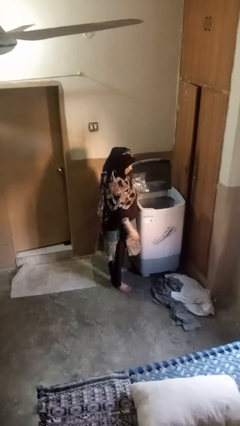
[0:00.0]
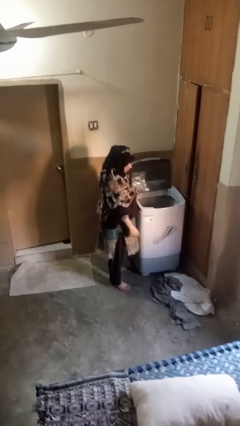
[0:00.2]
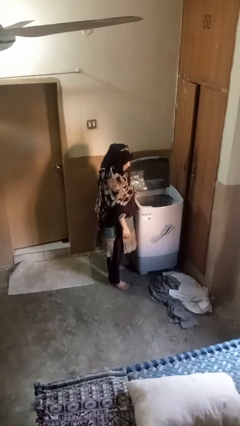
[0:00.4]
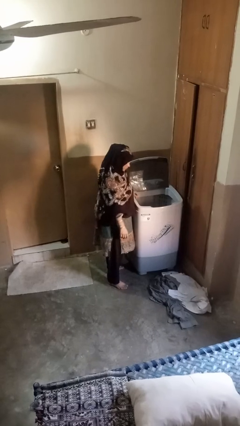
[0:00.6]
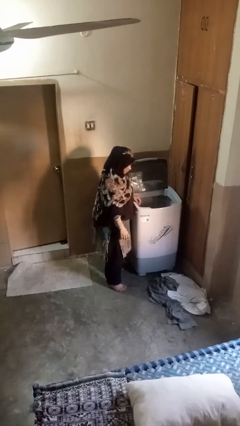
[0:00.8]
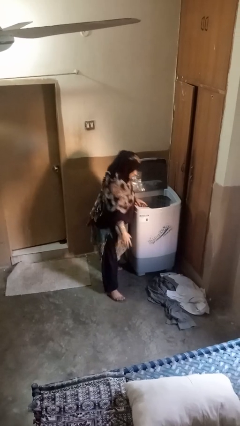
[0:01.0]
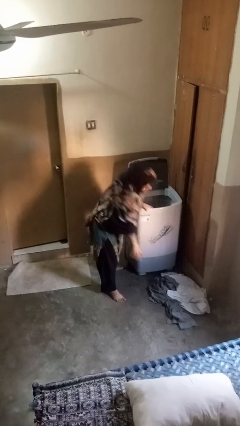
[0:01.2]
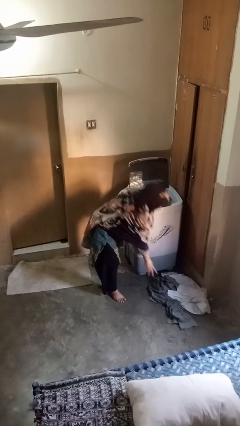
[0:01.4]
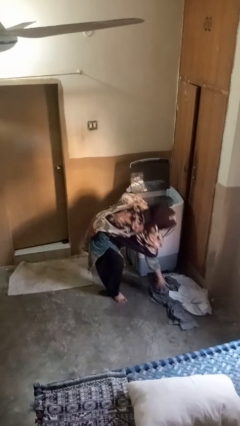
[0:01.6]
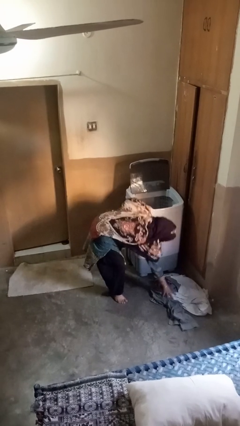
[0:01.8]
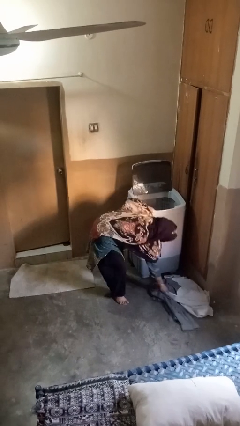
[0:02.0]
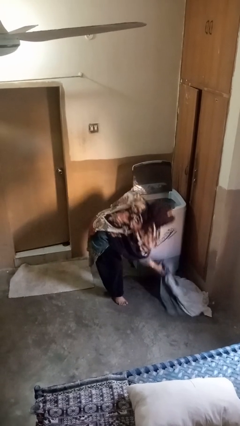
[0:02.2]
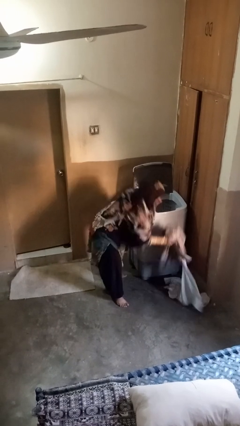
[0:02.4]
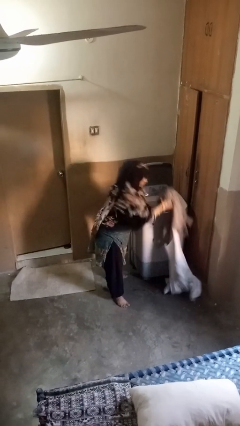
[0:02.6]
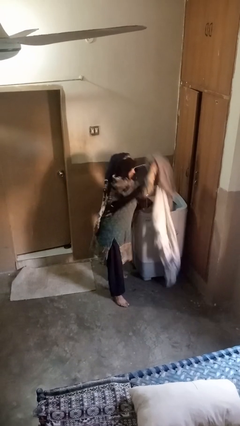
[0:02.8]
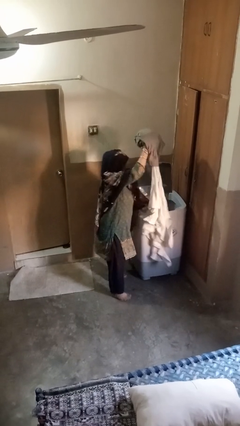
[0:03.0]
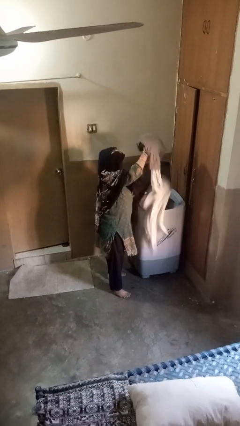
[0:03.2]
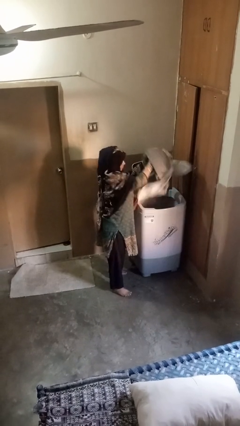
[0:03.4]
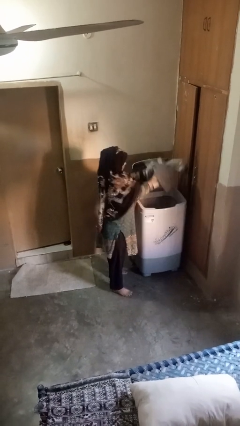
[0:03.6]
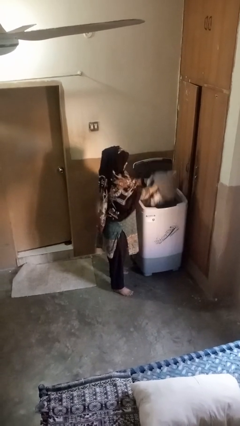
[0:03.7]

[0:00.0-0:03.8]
person loads clotheswasher

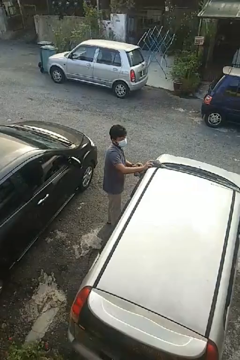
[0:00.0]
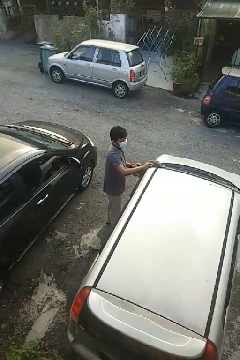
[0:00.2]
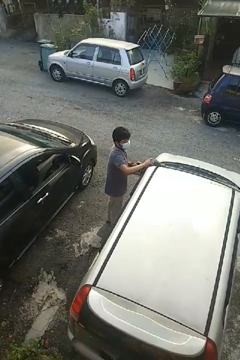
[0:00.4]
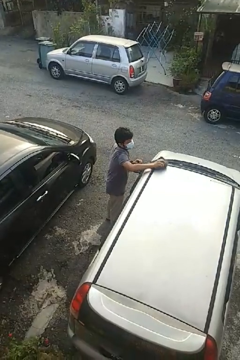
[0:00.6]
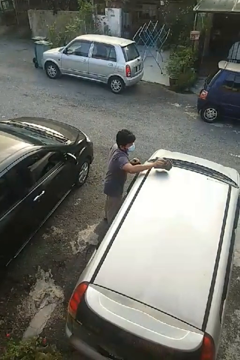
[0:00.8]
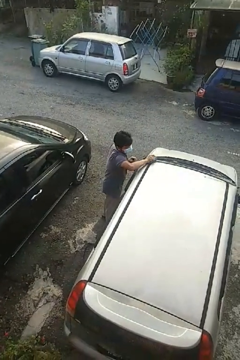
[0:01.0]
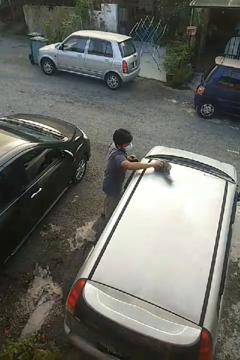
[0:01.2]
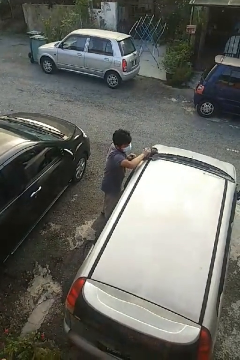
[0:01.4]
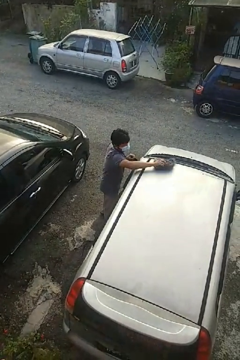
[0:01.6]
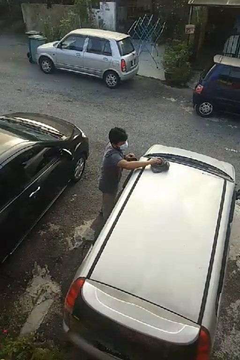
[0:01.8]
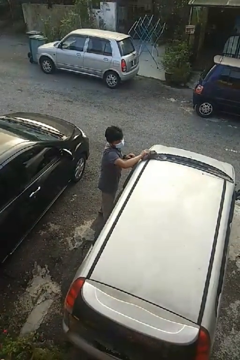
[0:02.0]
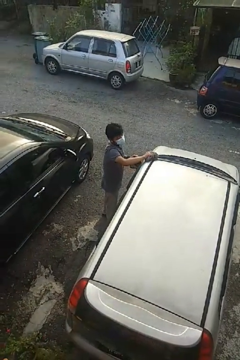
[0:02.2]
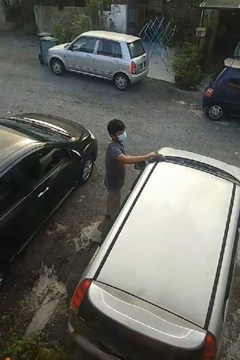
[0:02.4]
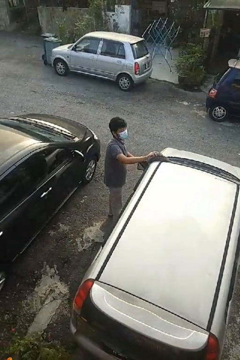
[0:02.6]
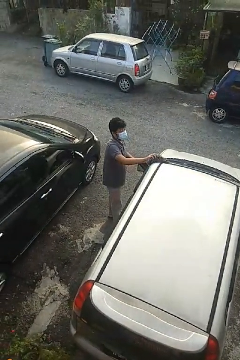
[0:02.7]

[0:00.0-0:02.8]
person polishes car with rag

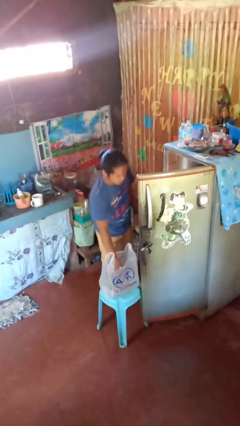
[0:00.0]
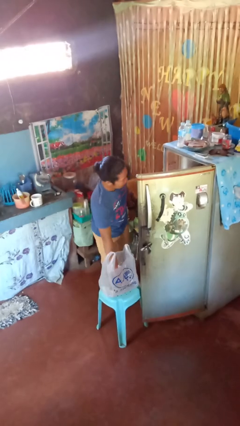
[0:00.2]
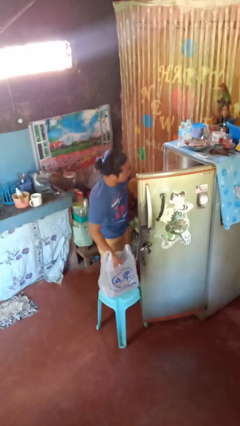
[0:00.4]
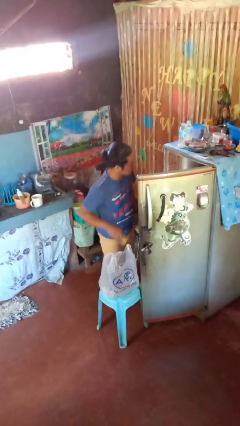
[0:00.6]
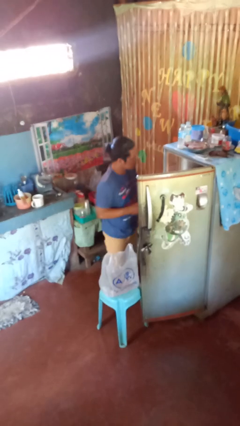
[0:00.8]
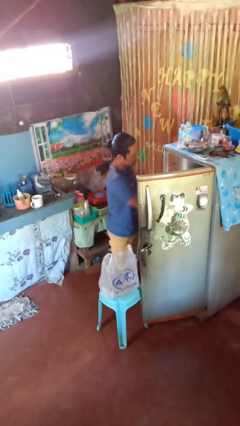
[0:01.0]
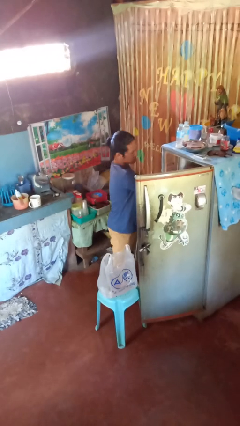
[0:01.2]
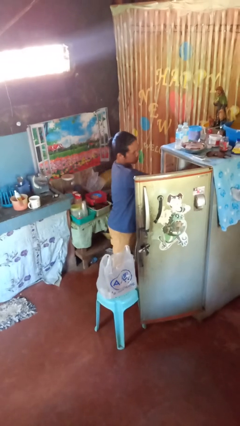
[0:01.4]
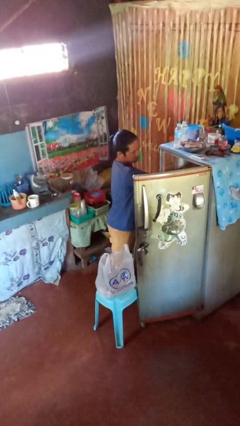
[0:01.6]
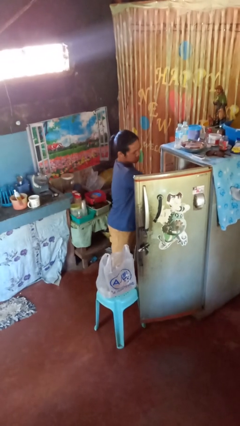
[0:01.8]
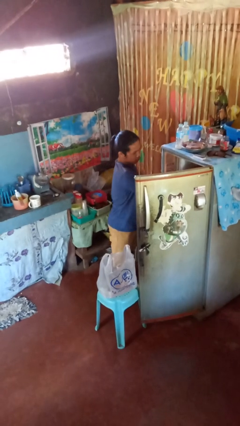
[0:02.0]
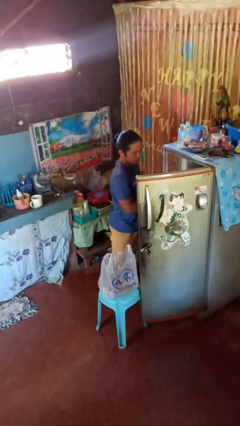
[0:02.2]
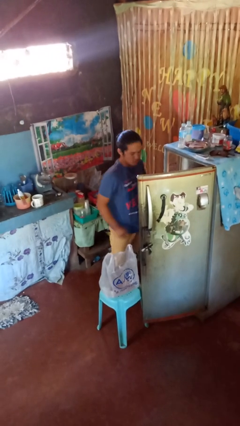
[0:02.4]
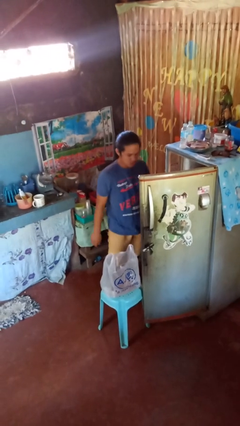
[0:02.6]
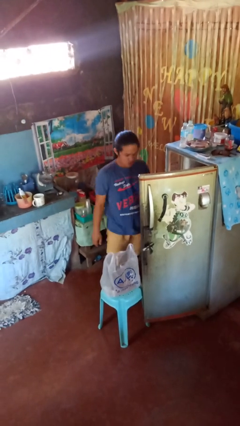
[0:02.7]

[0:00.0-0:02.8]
person loads groceries into refrigerator

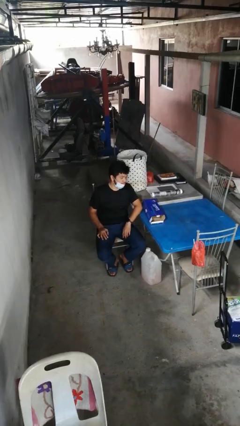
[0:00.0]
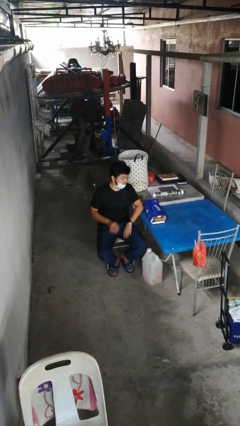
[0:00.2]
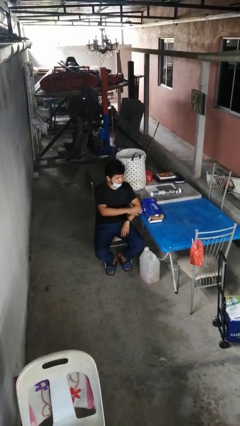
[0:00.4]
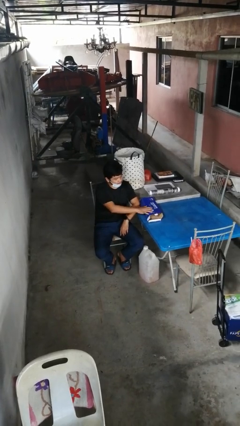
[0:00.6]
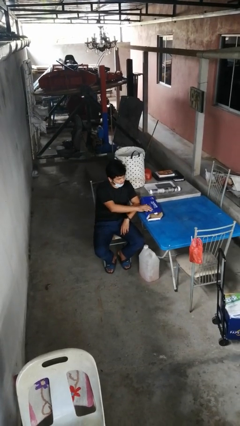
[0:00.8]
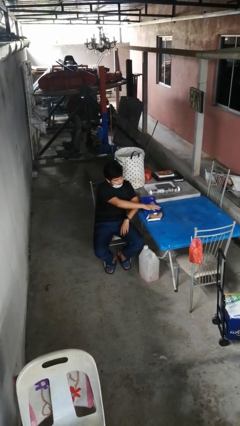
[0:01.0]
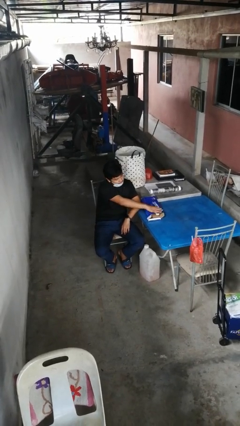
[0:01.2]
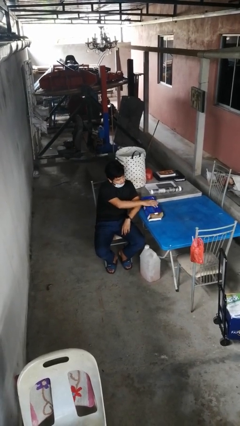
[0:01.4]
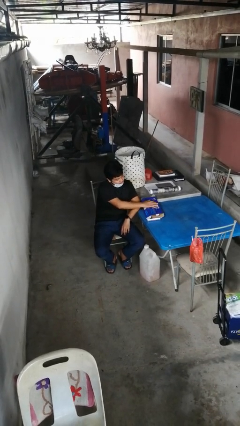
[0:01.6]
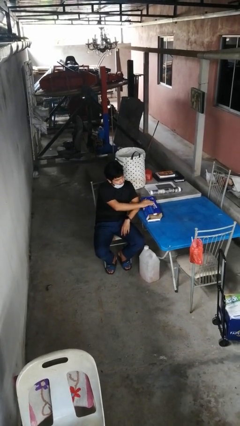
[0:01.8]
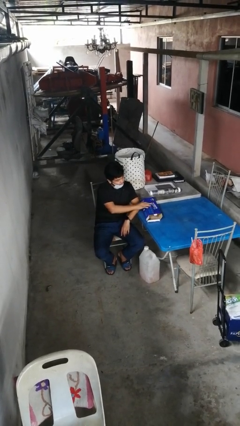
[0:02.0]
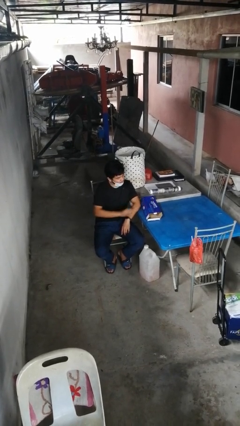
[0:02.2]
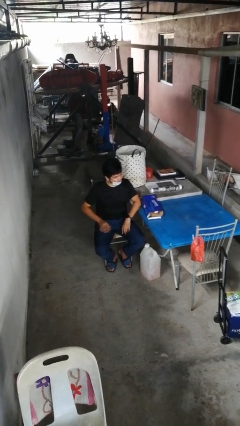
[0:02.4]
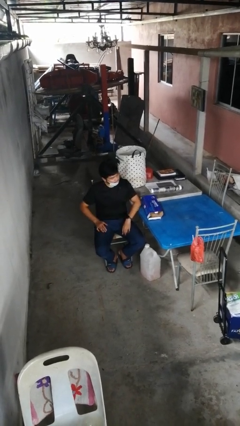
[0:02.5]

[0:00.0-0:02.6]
person taps object with finger

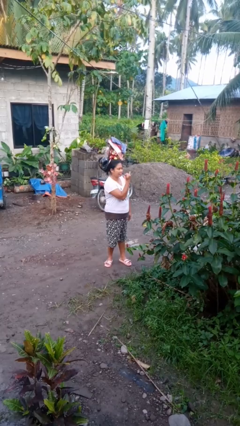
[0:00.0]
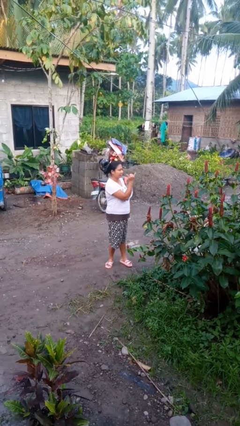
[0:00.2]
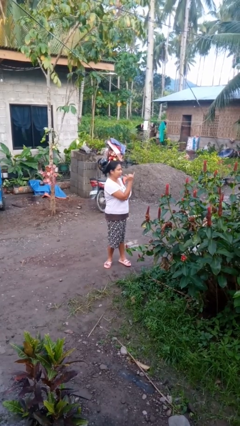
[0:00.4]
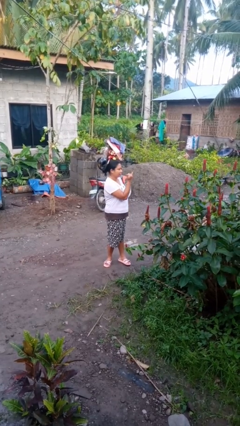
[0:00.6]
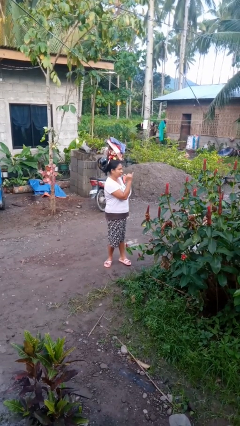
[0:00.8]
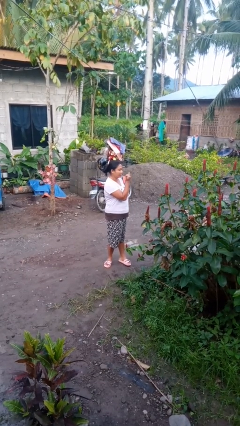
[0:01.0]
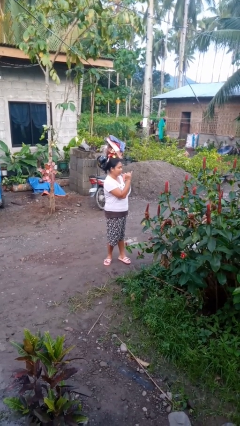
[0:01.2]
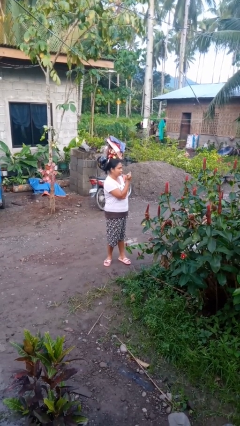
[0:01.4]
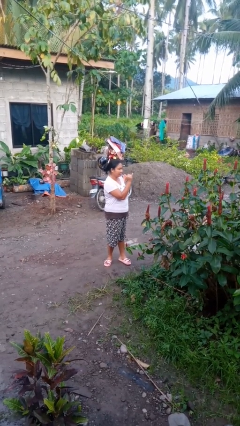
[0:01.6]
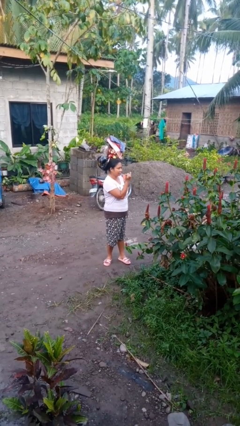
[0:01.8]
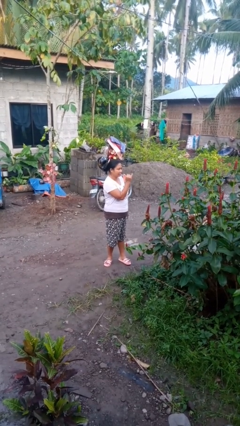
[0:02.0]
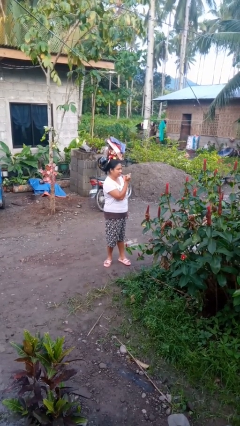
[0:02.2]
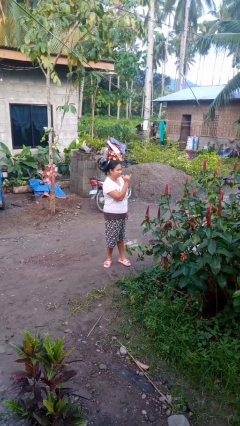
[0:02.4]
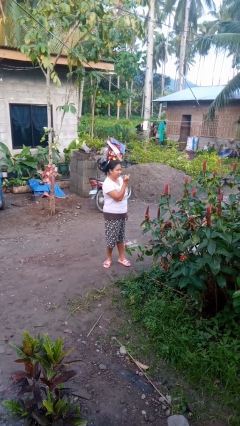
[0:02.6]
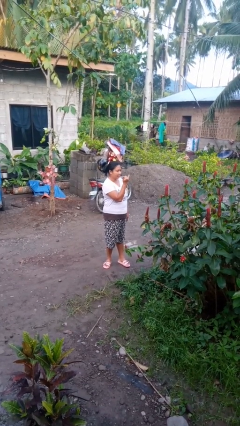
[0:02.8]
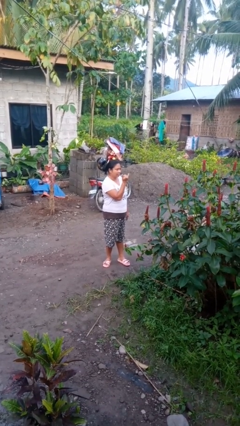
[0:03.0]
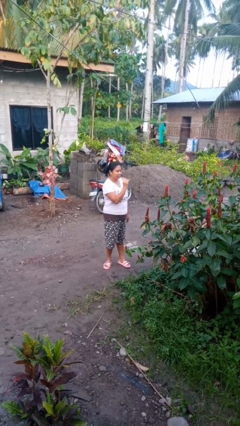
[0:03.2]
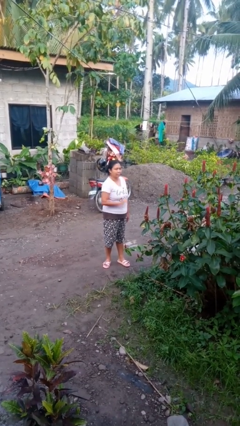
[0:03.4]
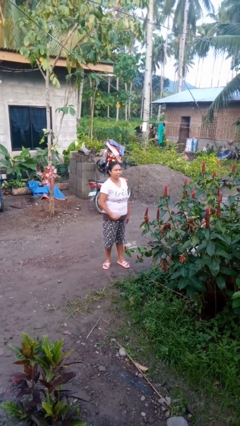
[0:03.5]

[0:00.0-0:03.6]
person gestures hang loose

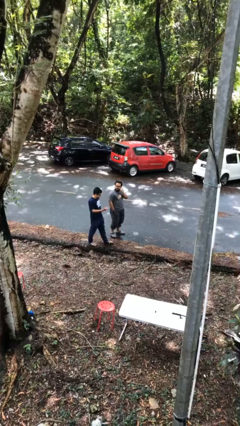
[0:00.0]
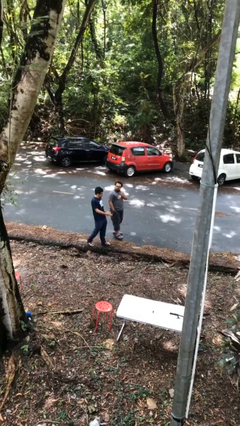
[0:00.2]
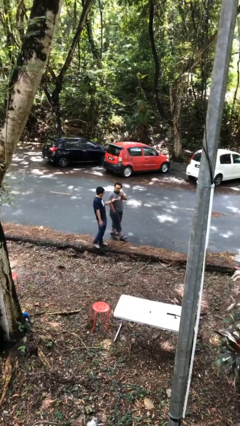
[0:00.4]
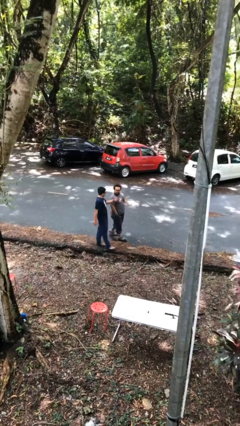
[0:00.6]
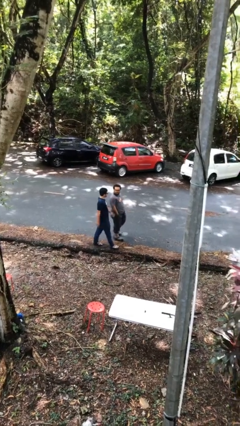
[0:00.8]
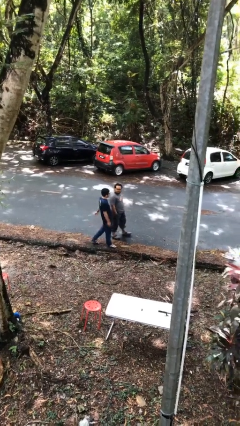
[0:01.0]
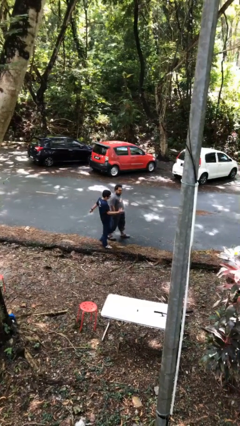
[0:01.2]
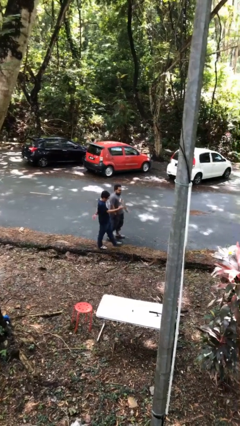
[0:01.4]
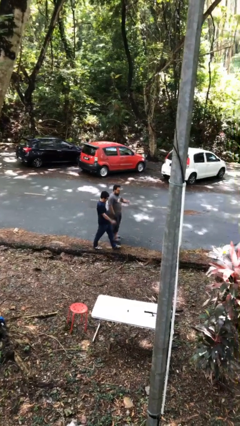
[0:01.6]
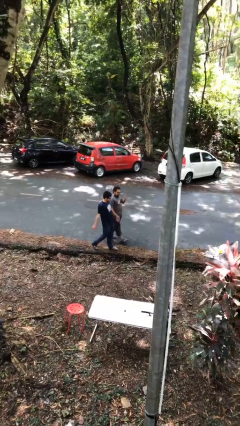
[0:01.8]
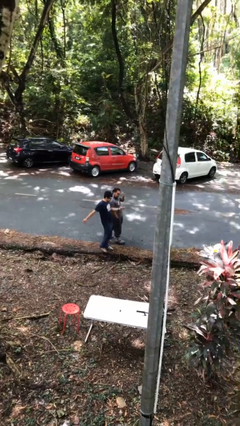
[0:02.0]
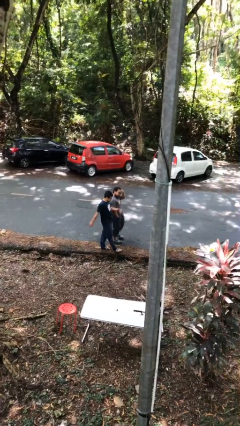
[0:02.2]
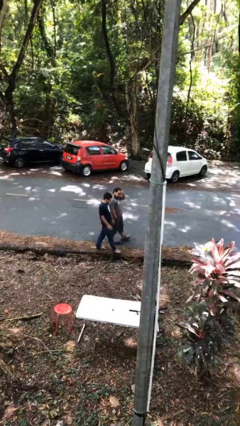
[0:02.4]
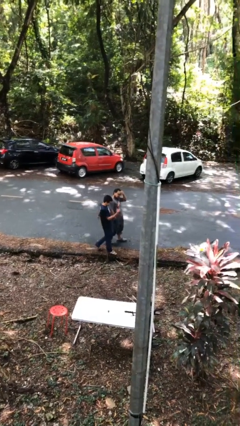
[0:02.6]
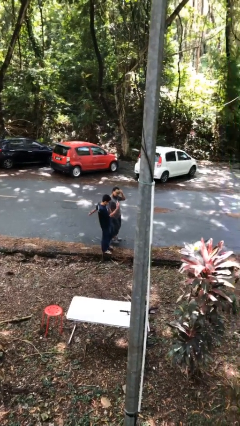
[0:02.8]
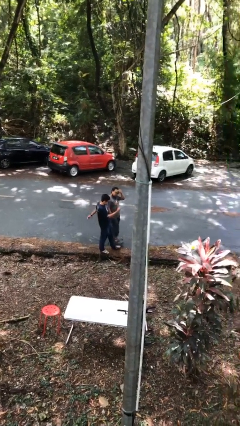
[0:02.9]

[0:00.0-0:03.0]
person talks to person
